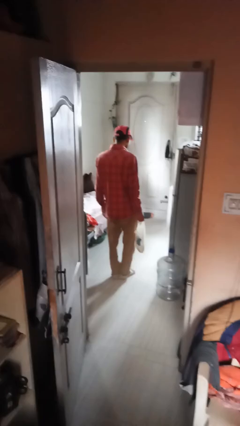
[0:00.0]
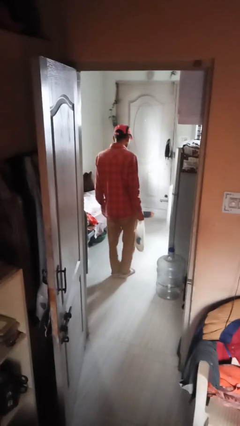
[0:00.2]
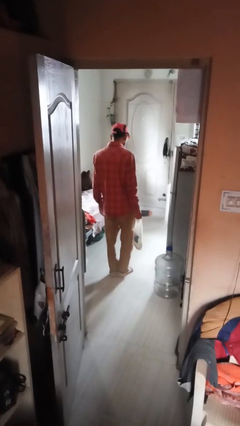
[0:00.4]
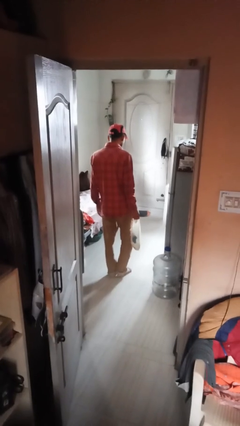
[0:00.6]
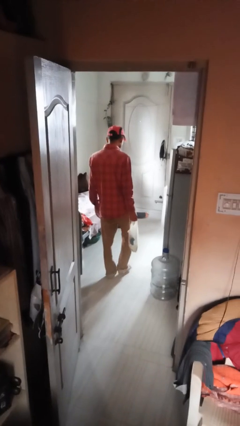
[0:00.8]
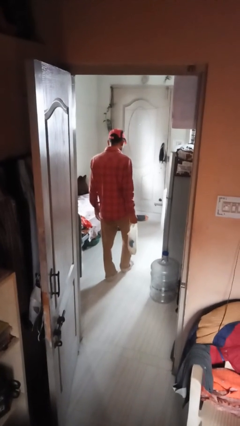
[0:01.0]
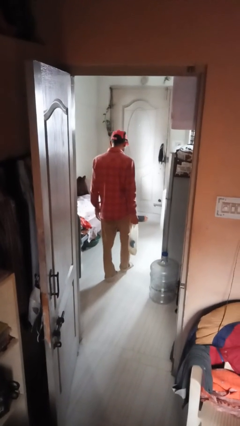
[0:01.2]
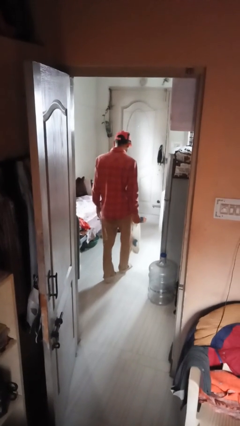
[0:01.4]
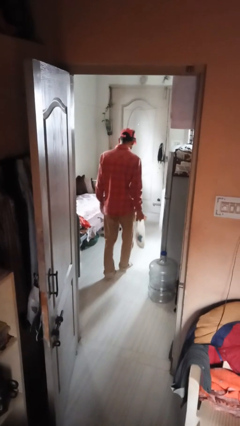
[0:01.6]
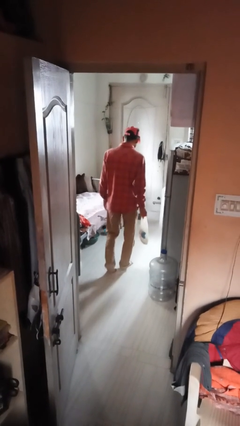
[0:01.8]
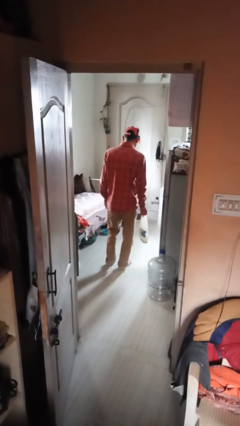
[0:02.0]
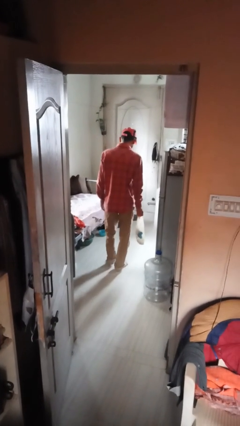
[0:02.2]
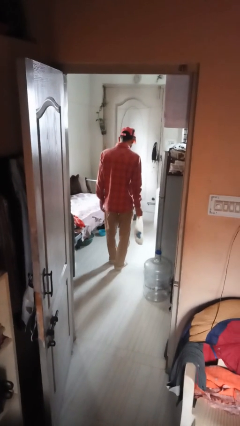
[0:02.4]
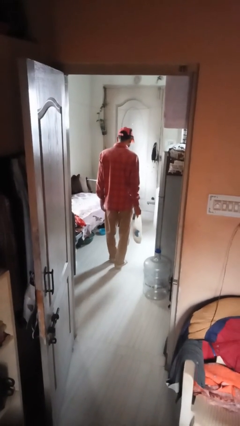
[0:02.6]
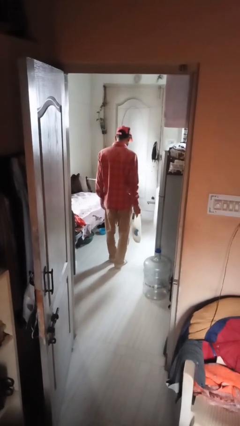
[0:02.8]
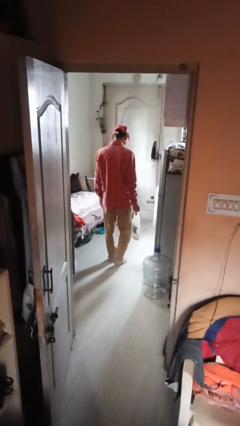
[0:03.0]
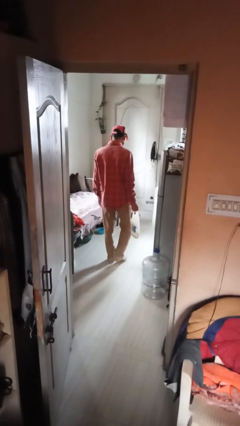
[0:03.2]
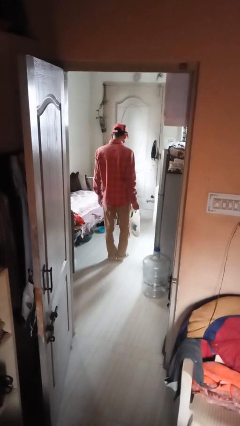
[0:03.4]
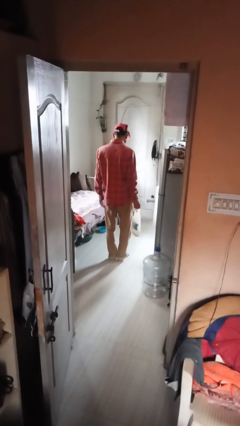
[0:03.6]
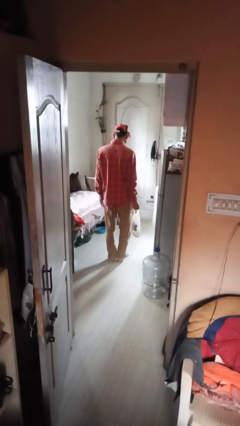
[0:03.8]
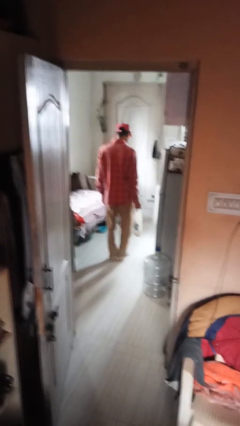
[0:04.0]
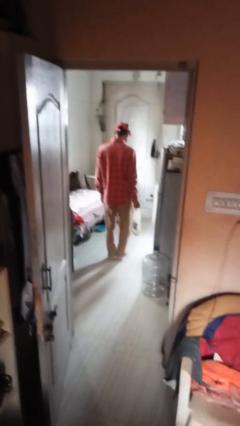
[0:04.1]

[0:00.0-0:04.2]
person carries groceries

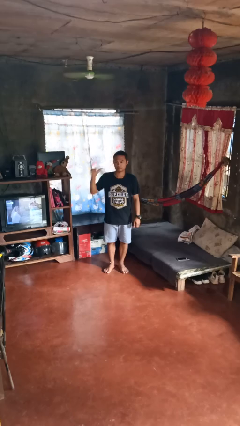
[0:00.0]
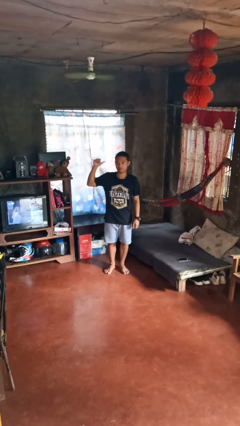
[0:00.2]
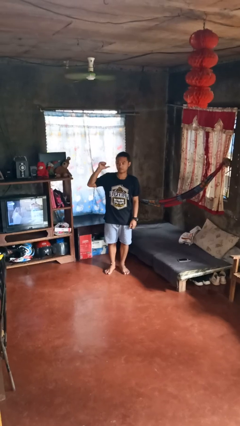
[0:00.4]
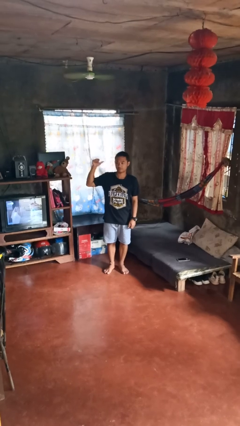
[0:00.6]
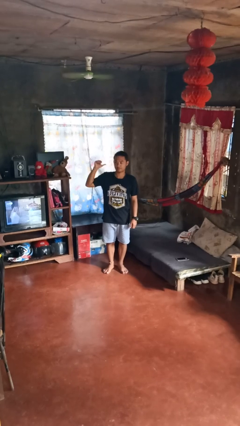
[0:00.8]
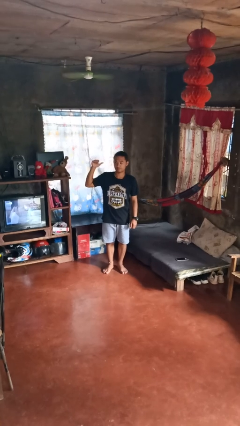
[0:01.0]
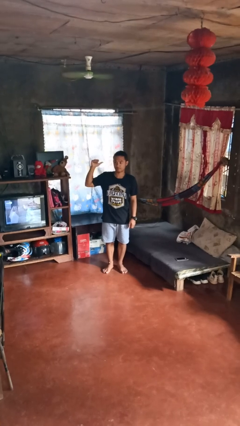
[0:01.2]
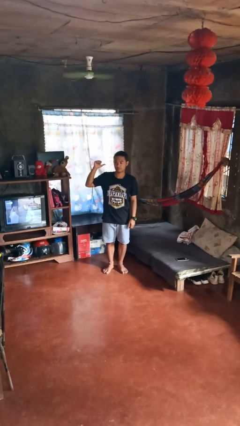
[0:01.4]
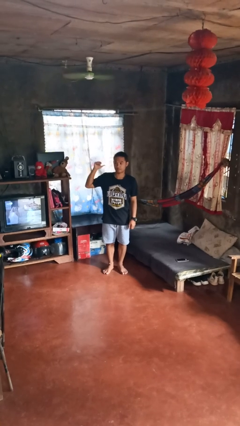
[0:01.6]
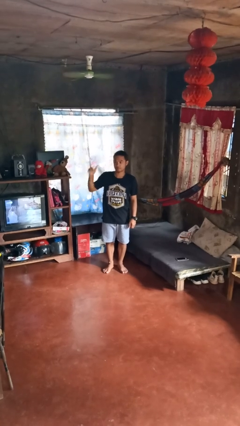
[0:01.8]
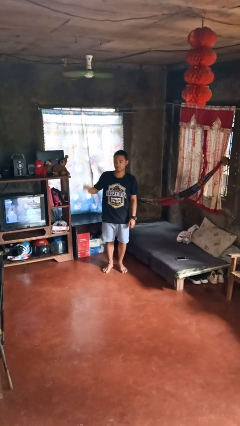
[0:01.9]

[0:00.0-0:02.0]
person gestures behind me

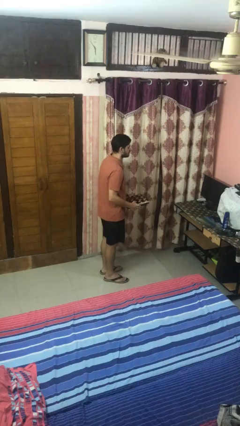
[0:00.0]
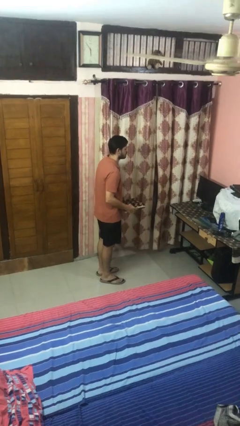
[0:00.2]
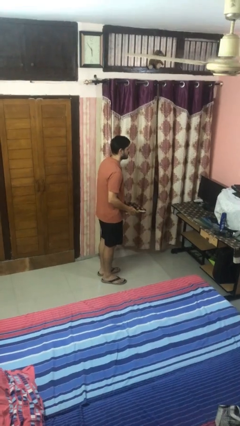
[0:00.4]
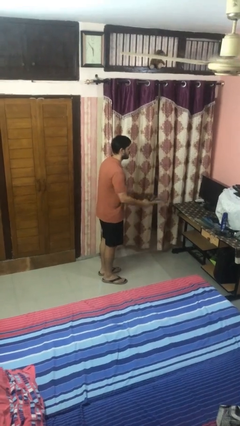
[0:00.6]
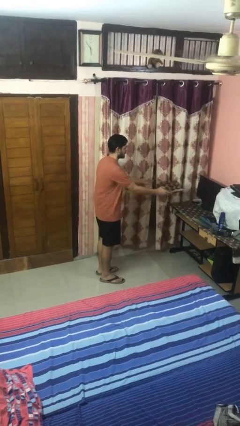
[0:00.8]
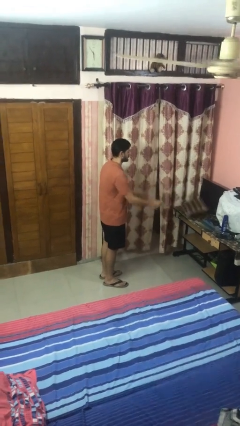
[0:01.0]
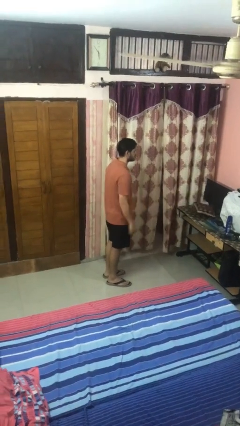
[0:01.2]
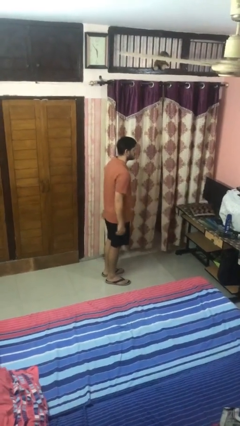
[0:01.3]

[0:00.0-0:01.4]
person throws object on table

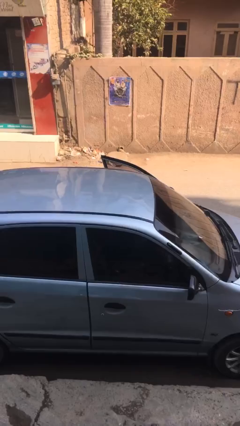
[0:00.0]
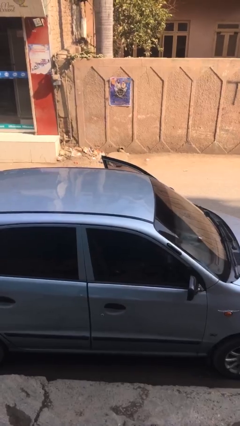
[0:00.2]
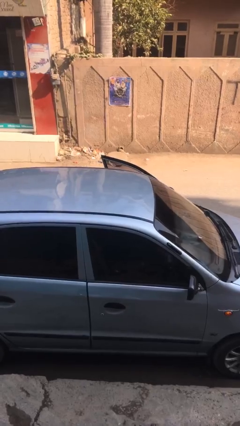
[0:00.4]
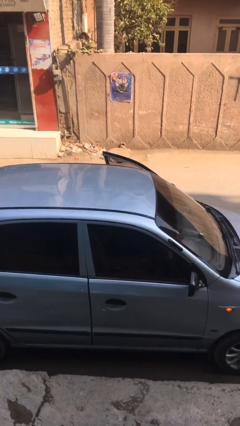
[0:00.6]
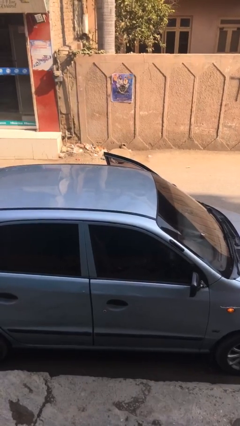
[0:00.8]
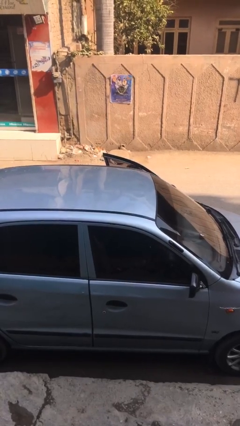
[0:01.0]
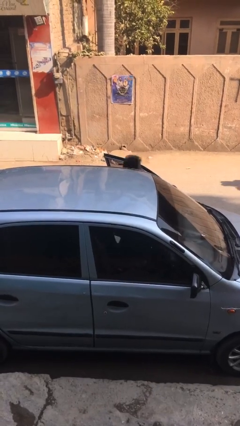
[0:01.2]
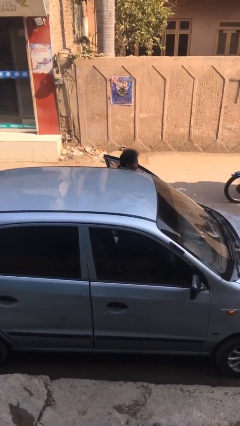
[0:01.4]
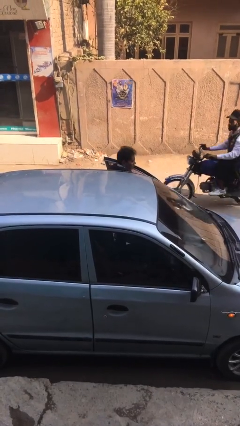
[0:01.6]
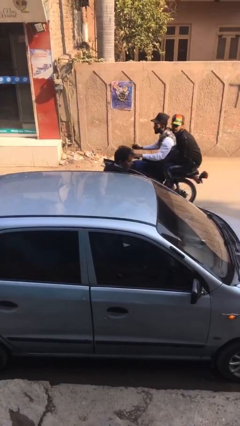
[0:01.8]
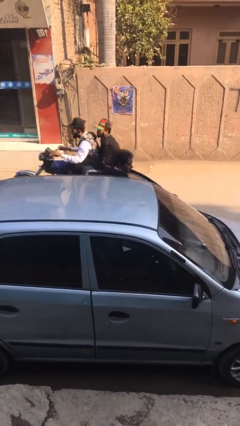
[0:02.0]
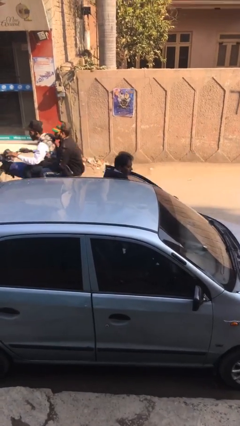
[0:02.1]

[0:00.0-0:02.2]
person exits car

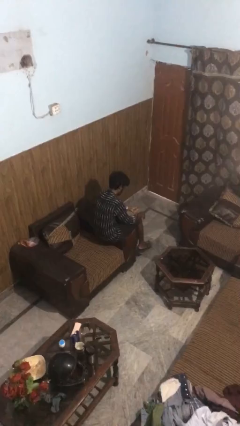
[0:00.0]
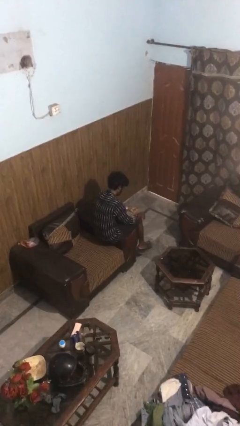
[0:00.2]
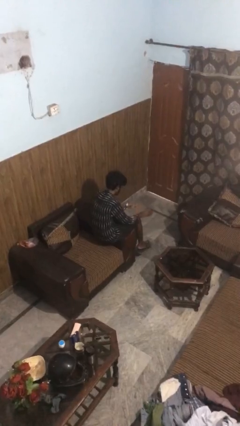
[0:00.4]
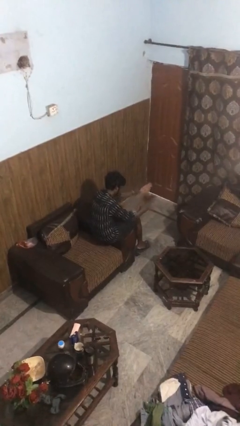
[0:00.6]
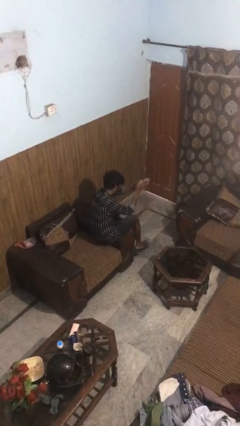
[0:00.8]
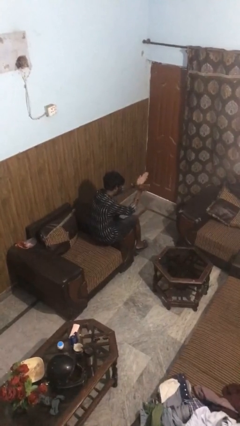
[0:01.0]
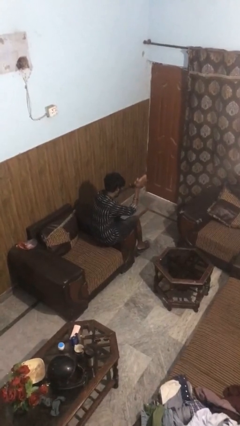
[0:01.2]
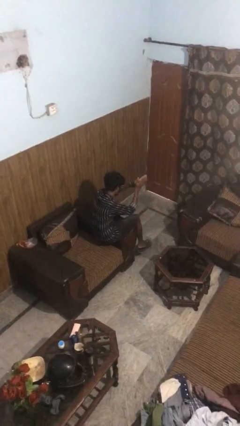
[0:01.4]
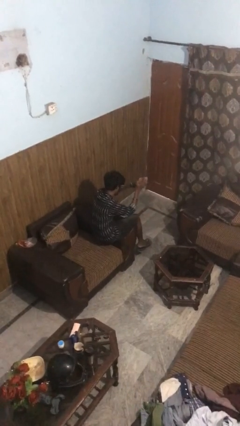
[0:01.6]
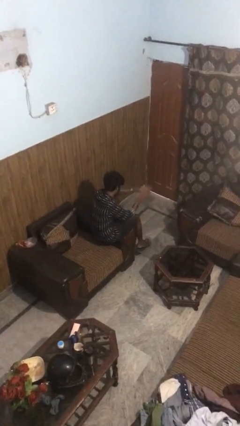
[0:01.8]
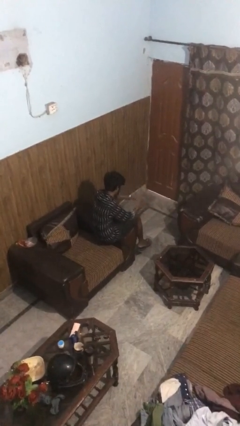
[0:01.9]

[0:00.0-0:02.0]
person claps hands

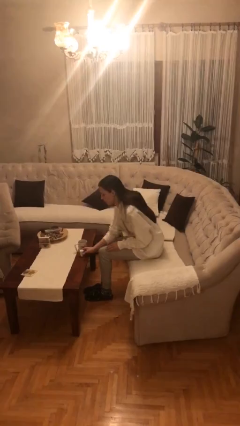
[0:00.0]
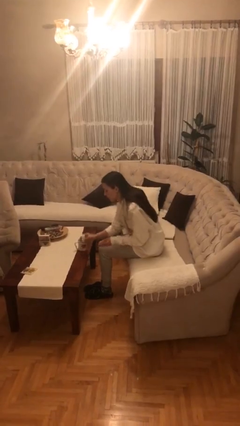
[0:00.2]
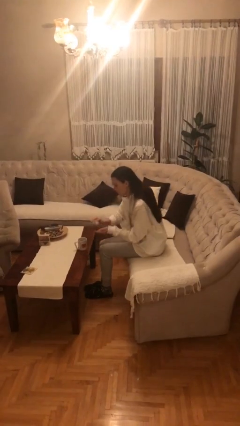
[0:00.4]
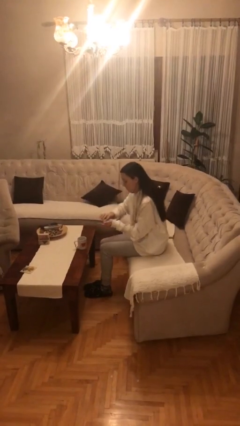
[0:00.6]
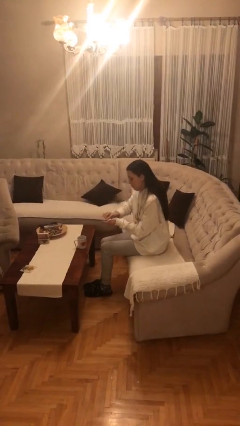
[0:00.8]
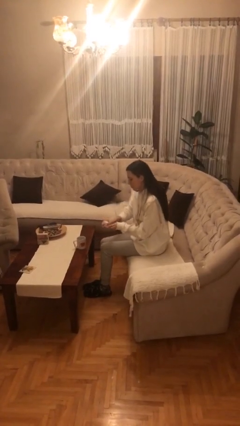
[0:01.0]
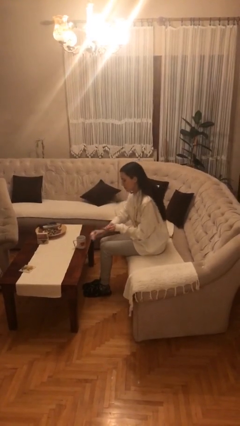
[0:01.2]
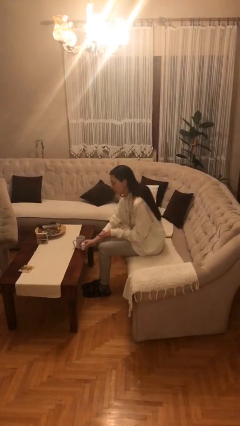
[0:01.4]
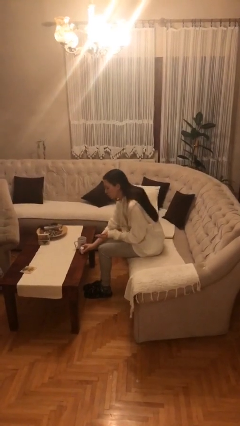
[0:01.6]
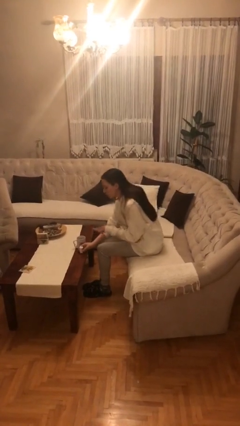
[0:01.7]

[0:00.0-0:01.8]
person takes medicine pills

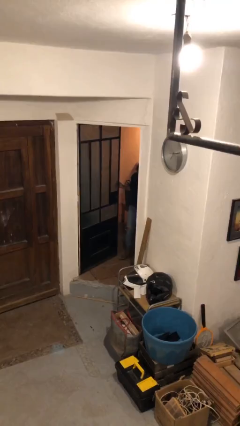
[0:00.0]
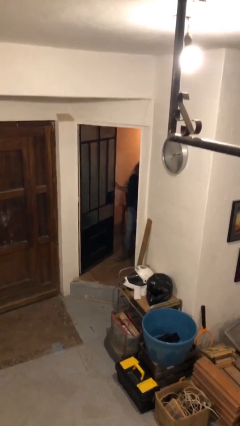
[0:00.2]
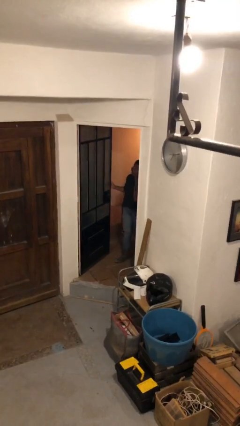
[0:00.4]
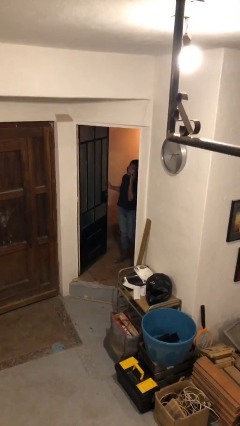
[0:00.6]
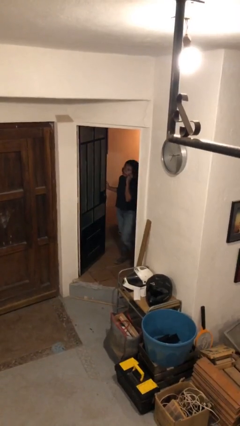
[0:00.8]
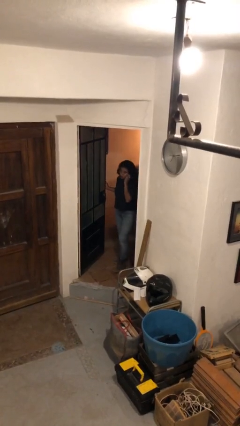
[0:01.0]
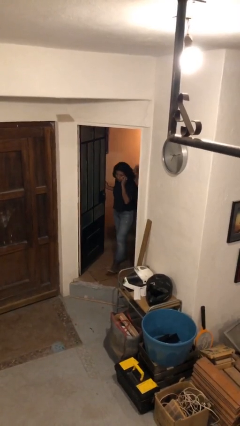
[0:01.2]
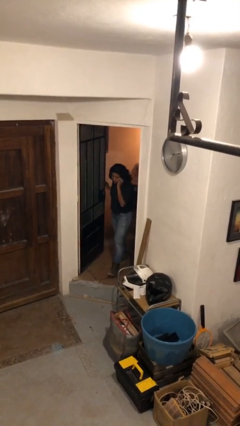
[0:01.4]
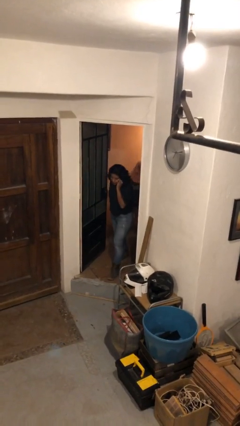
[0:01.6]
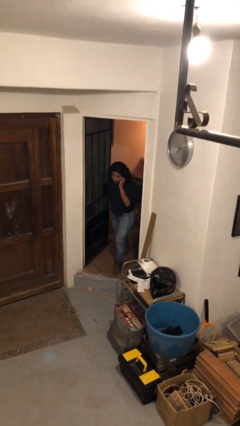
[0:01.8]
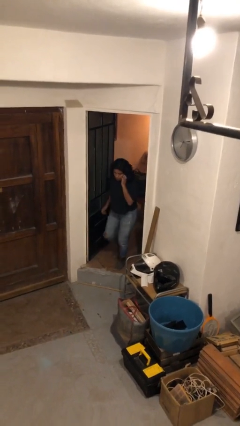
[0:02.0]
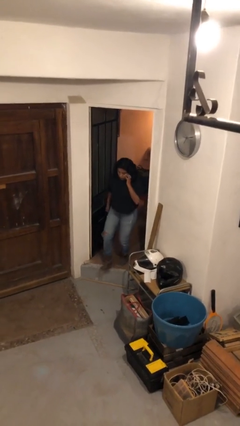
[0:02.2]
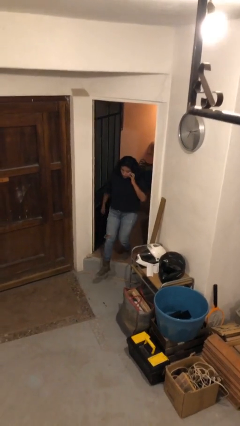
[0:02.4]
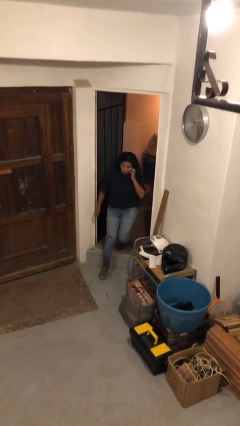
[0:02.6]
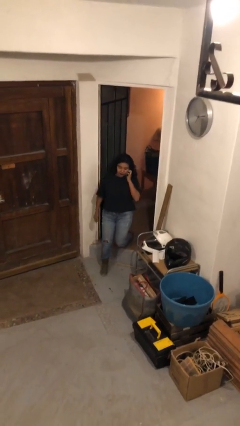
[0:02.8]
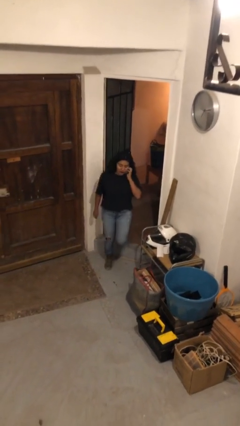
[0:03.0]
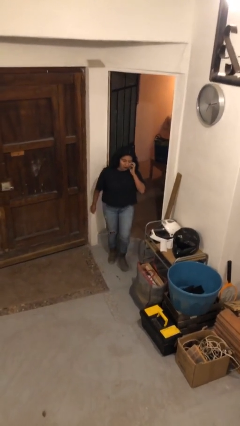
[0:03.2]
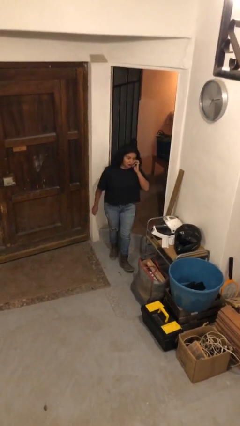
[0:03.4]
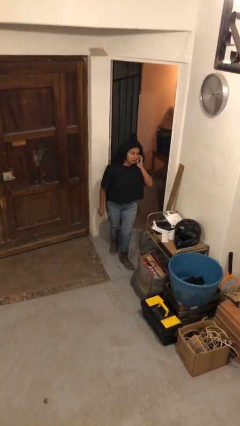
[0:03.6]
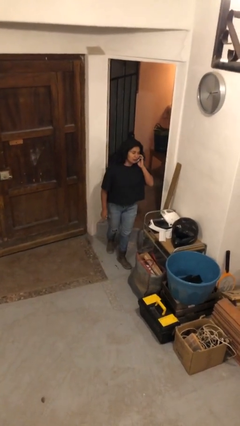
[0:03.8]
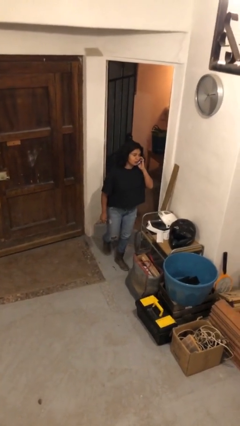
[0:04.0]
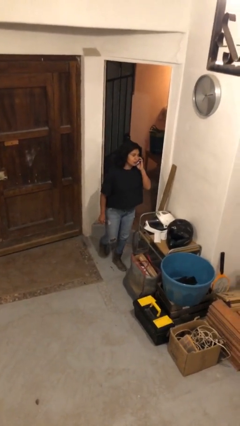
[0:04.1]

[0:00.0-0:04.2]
person enters scene through structure
